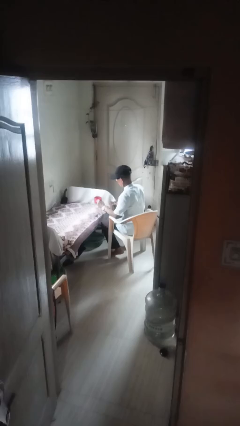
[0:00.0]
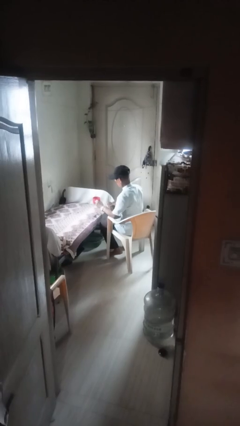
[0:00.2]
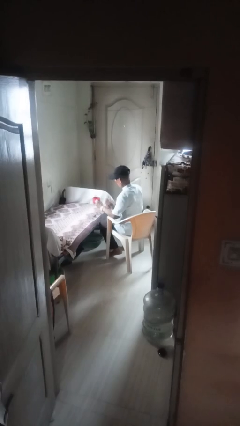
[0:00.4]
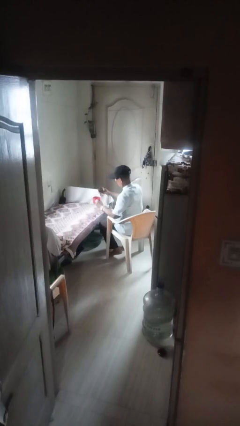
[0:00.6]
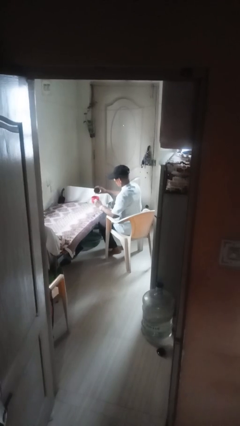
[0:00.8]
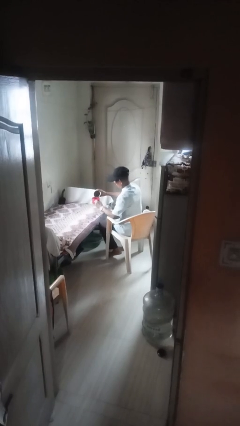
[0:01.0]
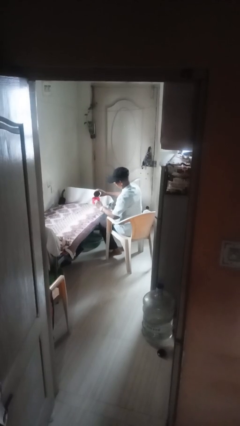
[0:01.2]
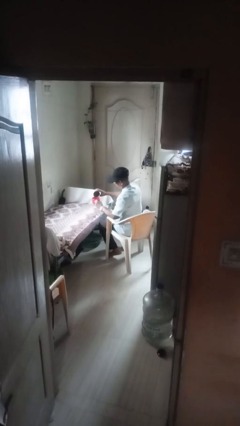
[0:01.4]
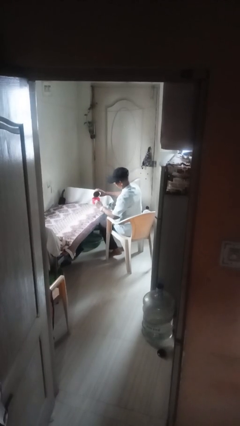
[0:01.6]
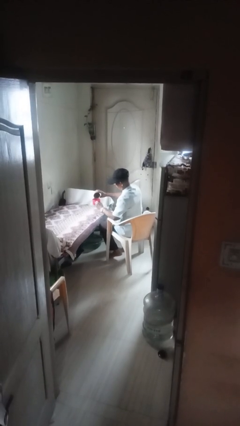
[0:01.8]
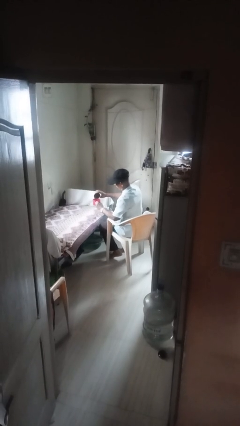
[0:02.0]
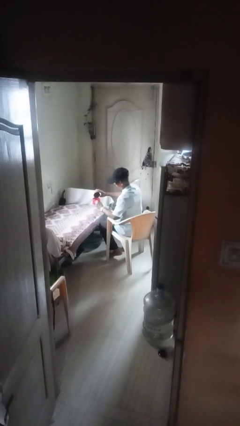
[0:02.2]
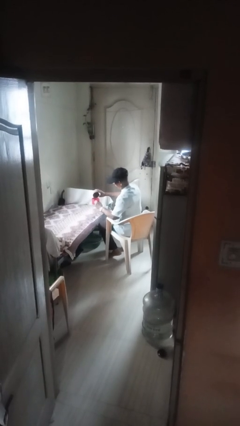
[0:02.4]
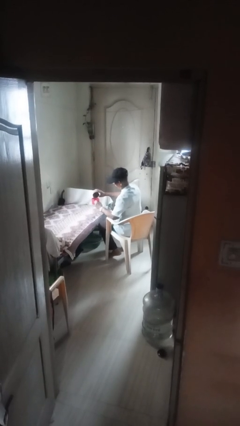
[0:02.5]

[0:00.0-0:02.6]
person pours coffee into mug

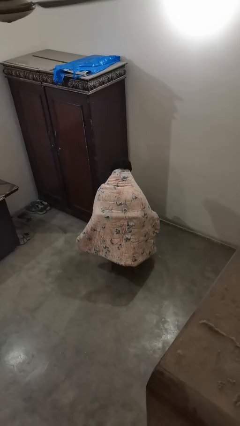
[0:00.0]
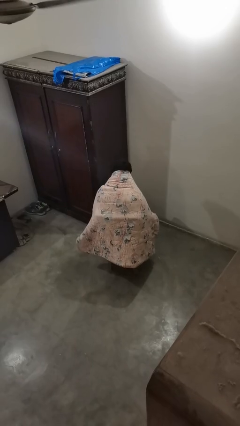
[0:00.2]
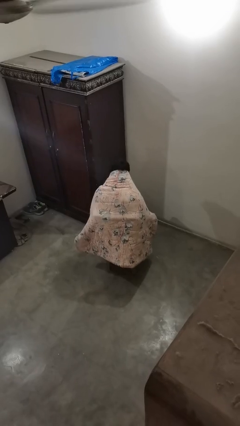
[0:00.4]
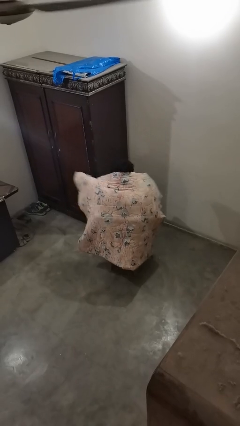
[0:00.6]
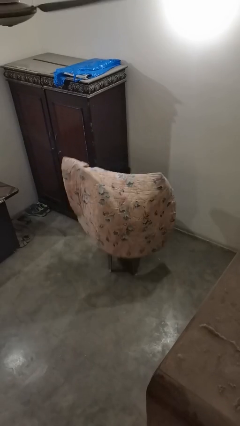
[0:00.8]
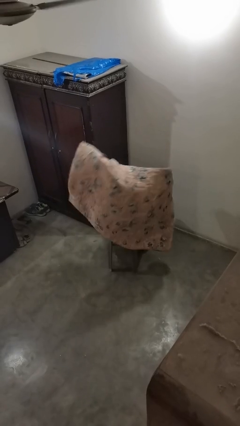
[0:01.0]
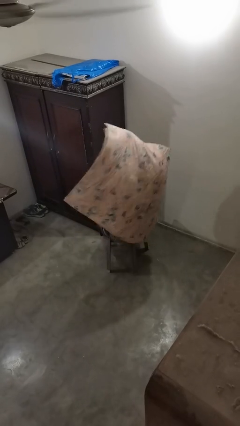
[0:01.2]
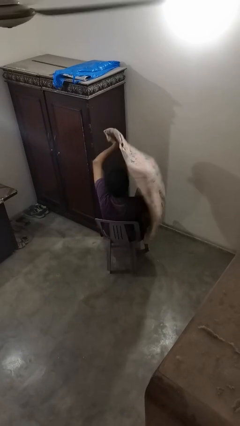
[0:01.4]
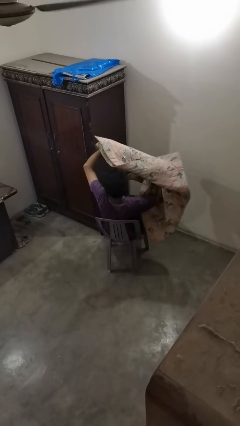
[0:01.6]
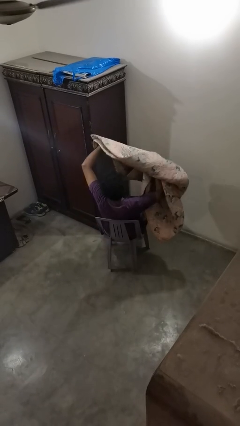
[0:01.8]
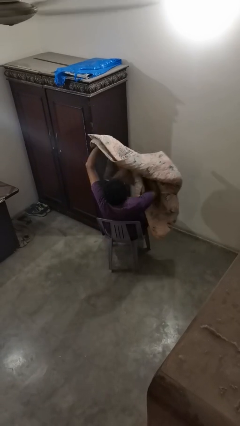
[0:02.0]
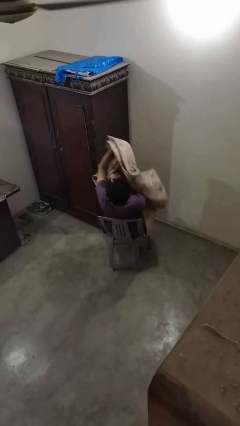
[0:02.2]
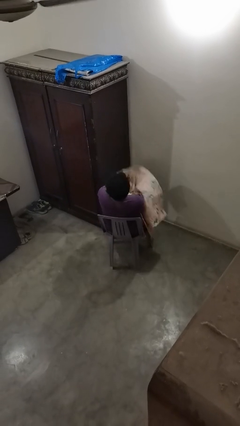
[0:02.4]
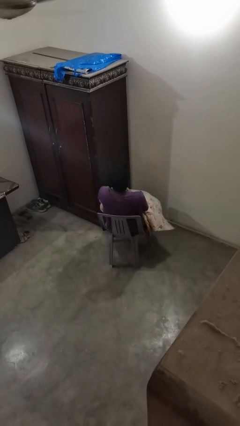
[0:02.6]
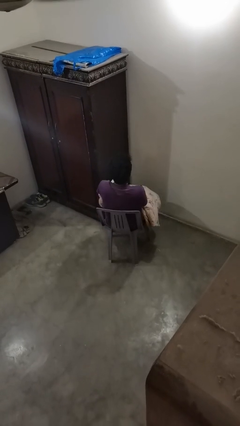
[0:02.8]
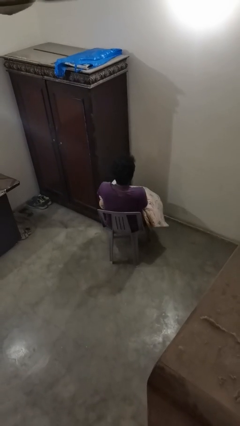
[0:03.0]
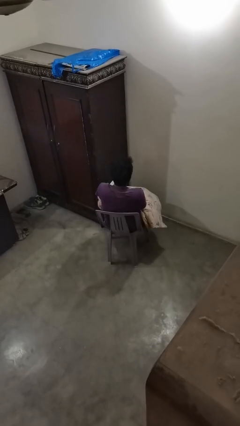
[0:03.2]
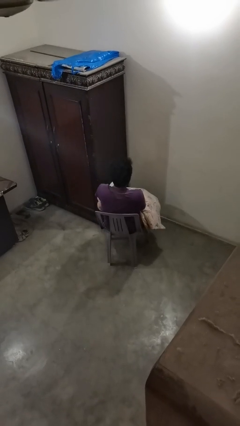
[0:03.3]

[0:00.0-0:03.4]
person uncovers with blanket

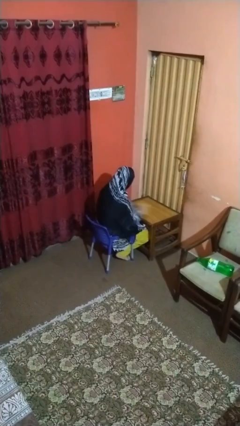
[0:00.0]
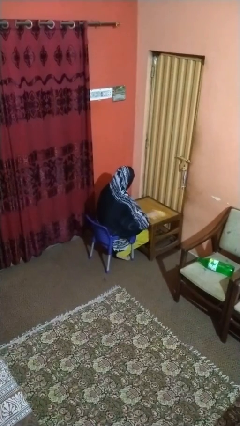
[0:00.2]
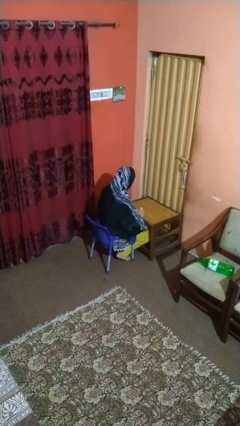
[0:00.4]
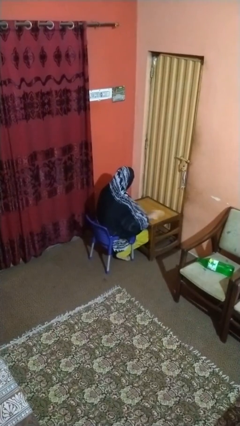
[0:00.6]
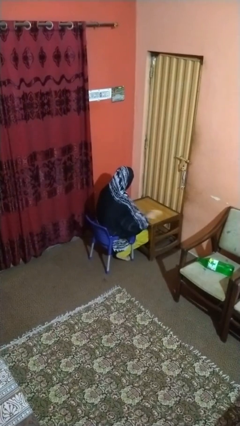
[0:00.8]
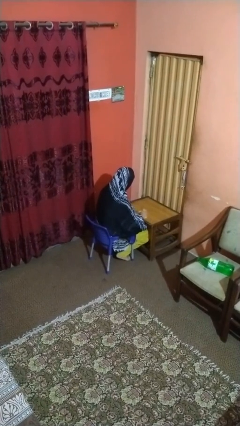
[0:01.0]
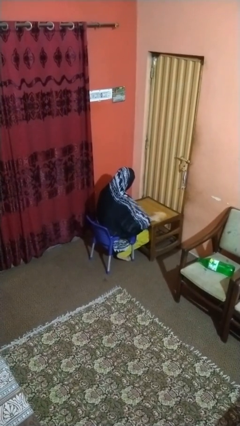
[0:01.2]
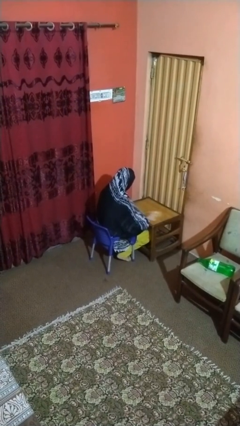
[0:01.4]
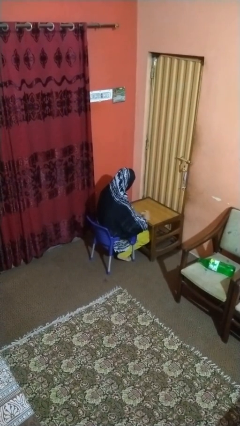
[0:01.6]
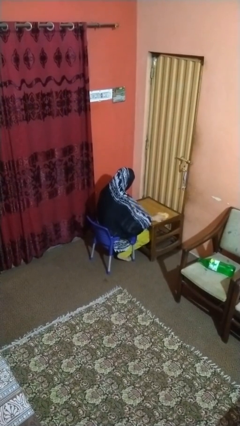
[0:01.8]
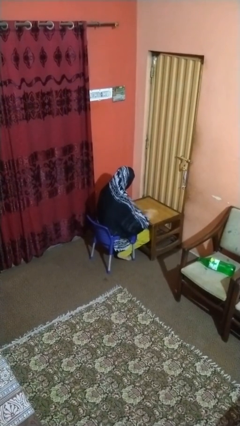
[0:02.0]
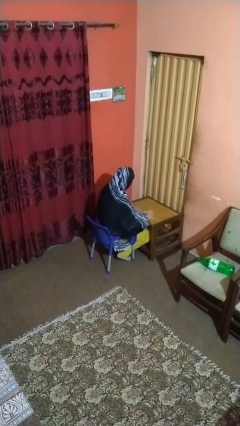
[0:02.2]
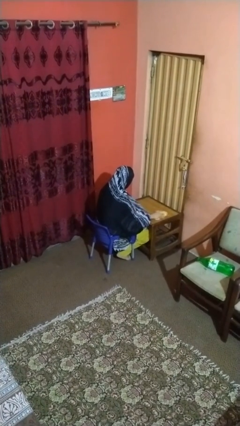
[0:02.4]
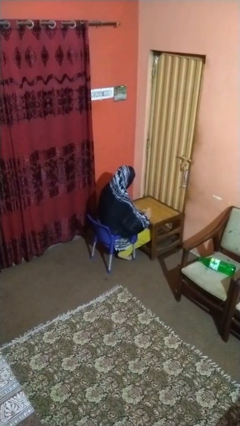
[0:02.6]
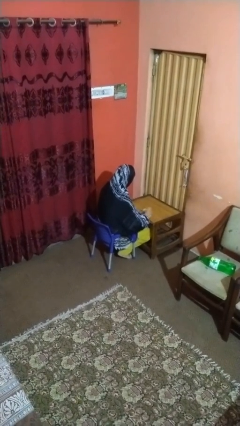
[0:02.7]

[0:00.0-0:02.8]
person cleans table with rag

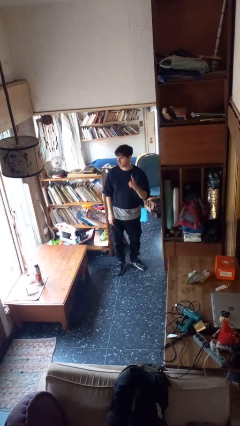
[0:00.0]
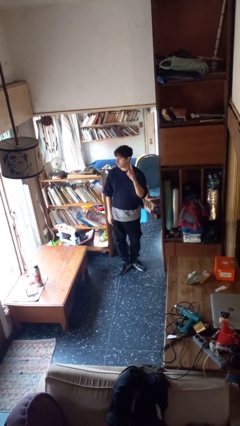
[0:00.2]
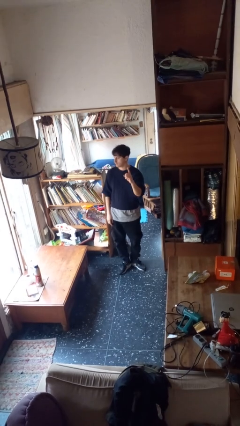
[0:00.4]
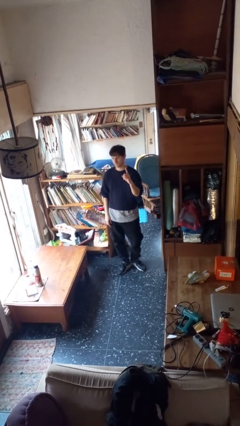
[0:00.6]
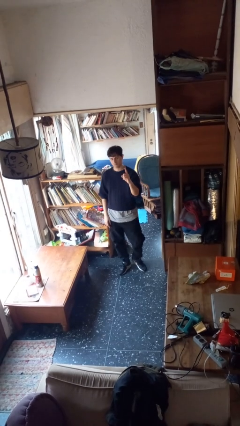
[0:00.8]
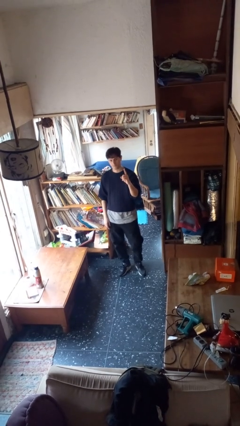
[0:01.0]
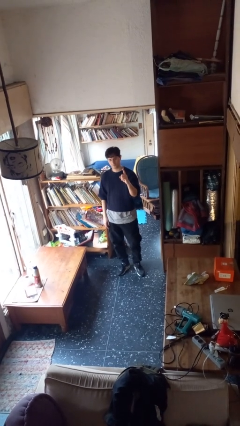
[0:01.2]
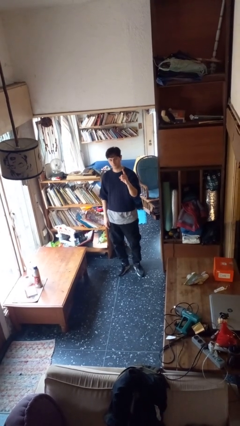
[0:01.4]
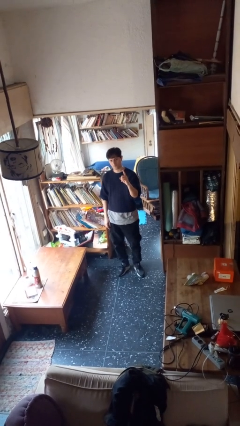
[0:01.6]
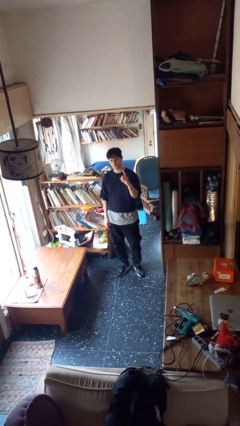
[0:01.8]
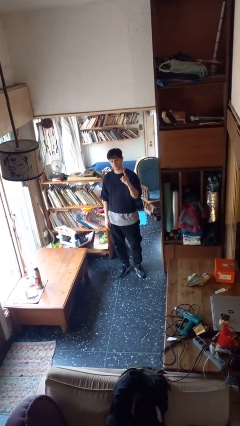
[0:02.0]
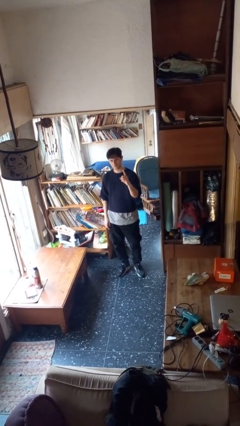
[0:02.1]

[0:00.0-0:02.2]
person gestures number one

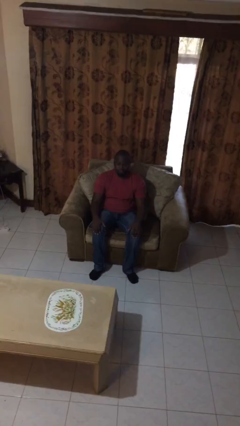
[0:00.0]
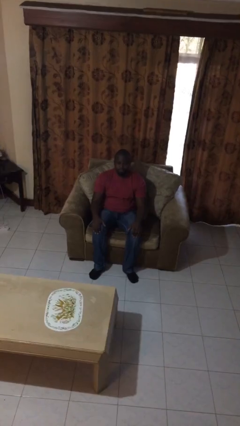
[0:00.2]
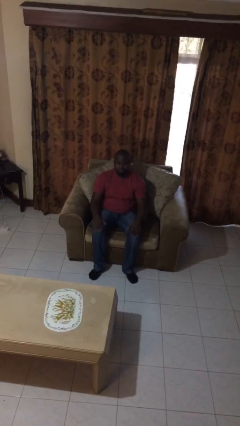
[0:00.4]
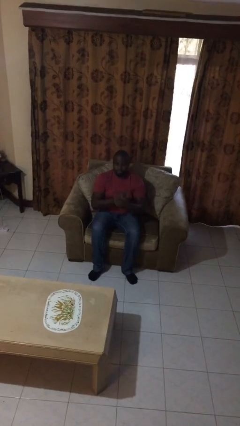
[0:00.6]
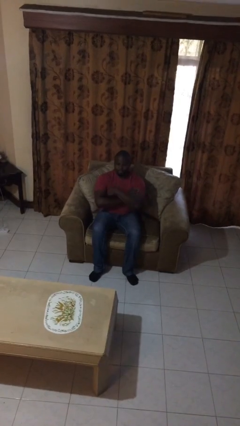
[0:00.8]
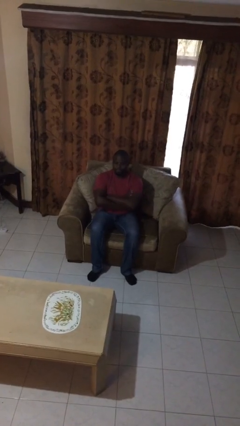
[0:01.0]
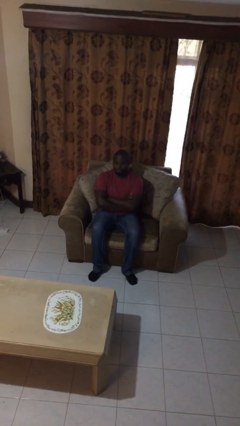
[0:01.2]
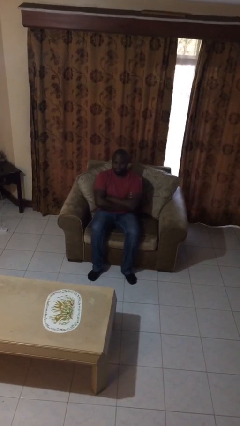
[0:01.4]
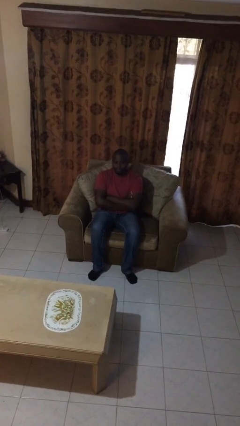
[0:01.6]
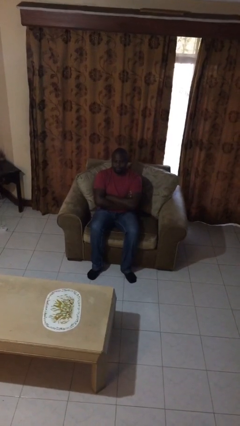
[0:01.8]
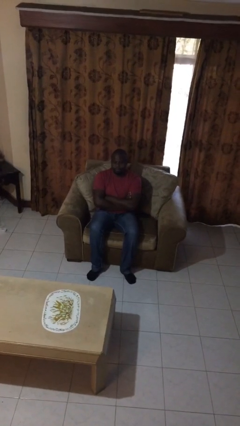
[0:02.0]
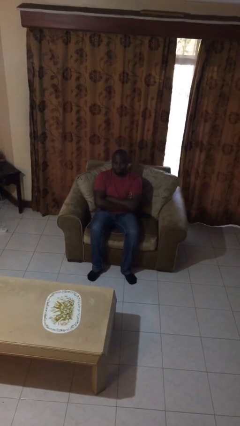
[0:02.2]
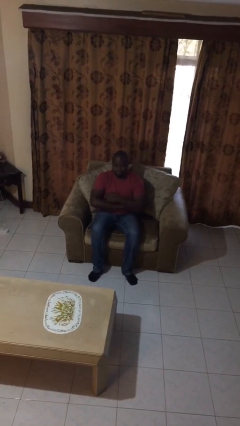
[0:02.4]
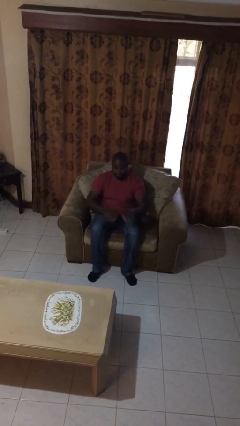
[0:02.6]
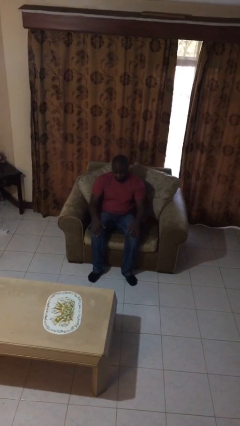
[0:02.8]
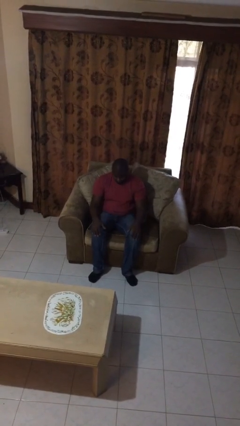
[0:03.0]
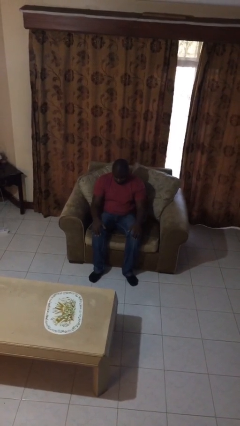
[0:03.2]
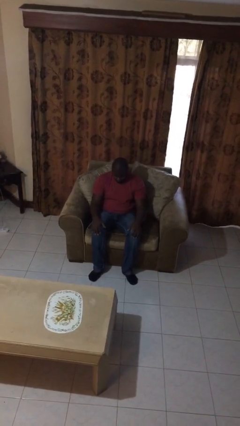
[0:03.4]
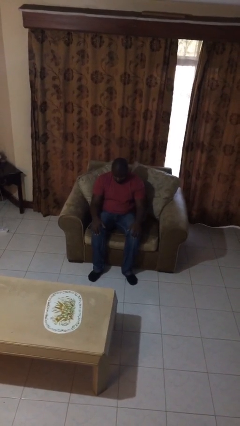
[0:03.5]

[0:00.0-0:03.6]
person crosses arms

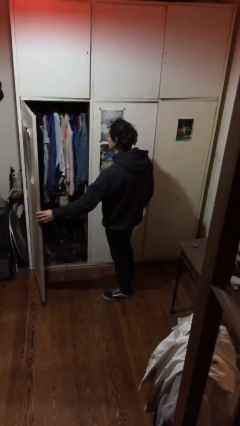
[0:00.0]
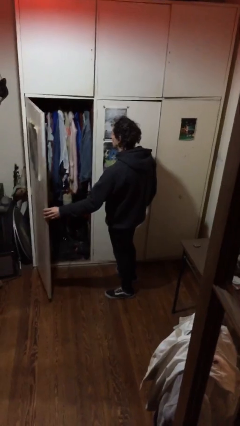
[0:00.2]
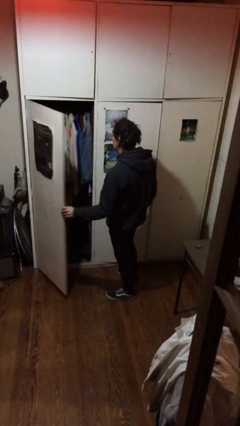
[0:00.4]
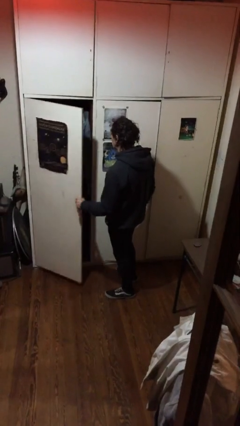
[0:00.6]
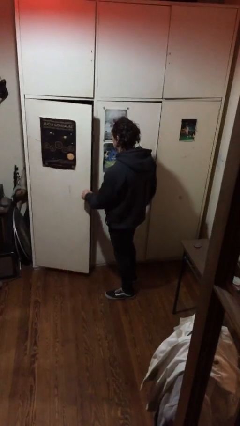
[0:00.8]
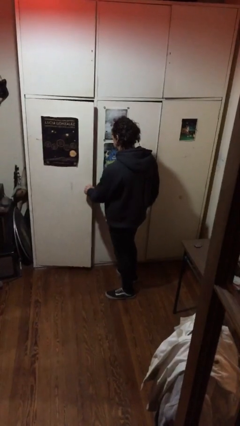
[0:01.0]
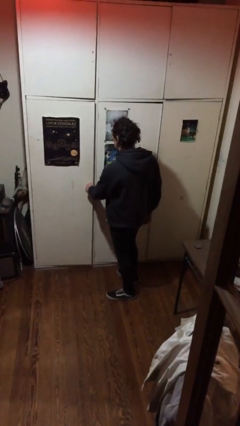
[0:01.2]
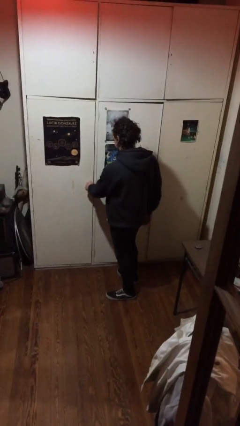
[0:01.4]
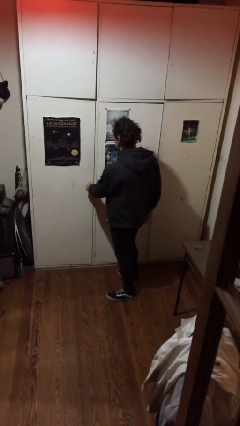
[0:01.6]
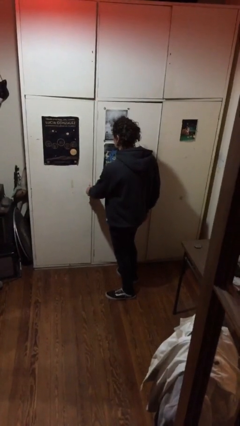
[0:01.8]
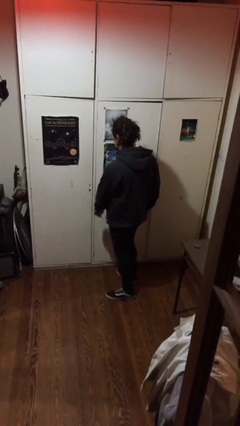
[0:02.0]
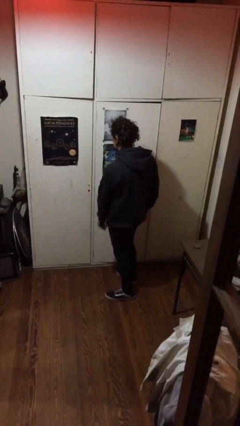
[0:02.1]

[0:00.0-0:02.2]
person closes closet door

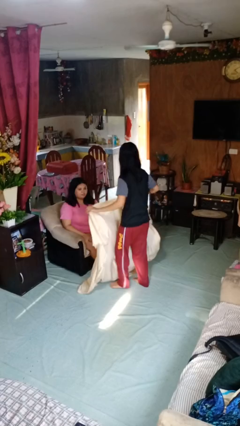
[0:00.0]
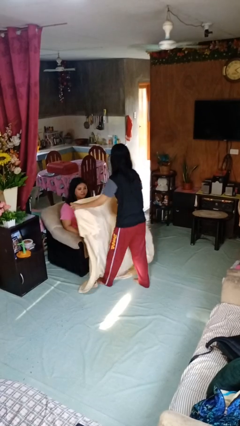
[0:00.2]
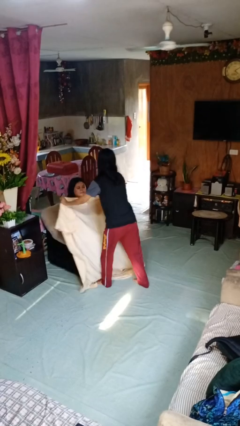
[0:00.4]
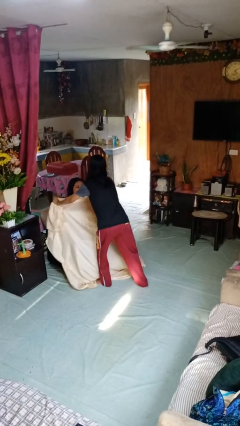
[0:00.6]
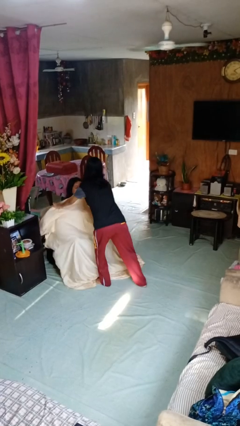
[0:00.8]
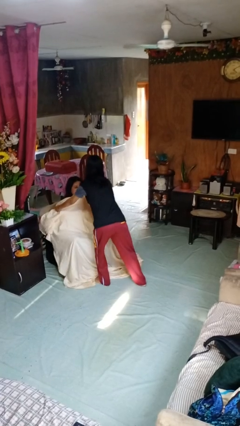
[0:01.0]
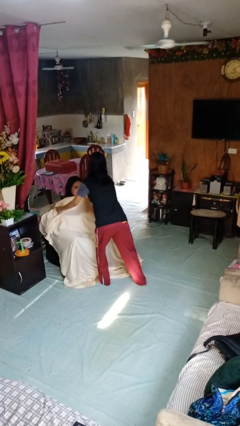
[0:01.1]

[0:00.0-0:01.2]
person covers friend with blanket
